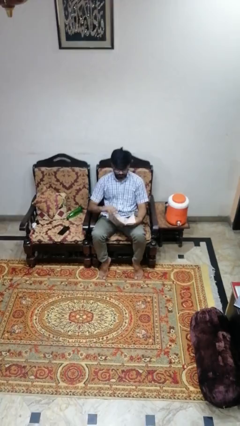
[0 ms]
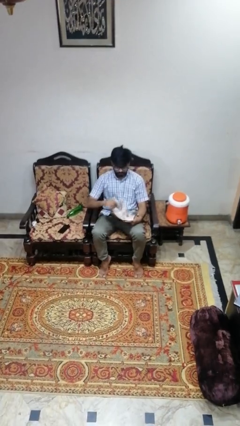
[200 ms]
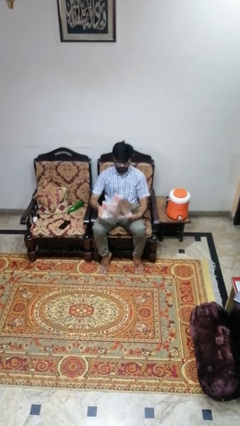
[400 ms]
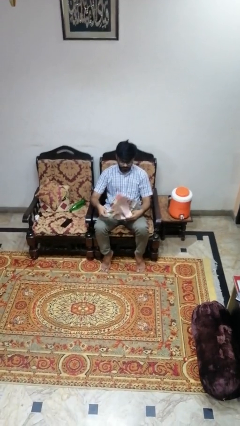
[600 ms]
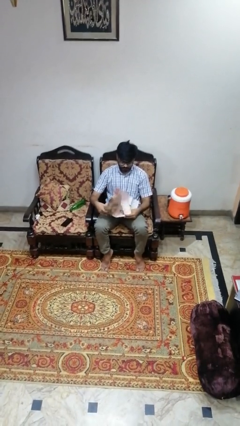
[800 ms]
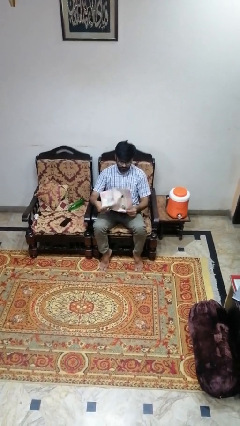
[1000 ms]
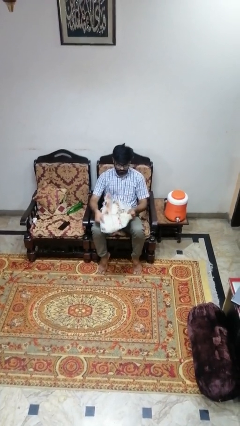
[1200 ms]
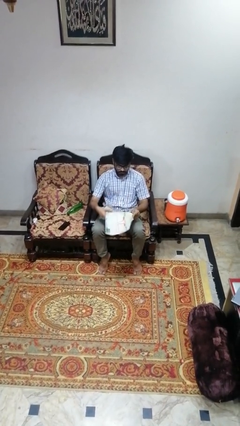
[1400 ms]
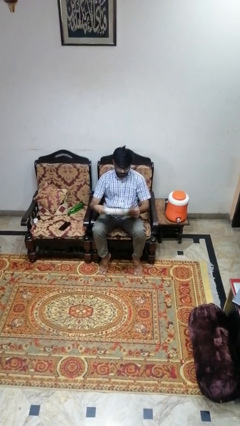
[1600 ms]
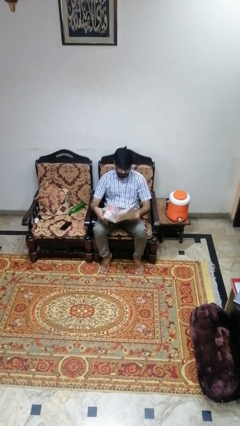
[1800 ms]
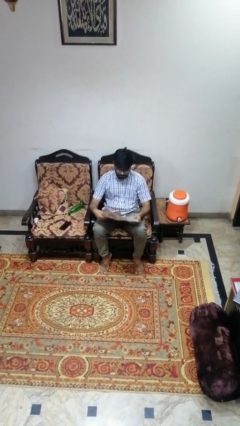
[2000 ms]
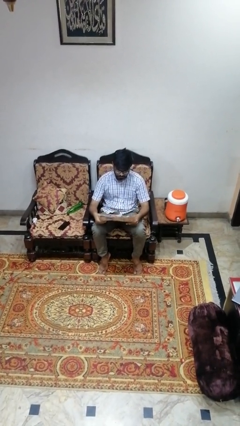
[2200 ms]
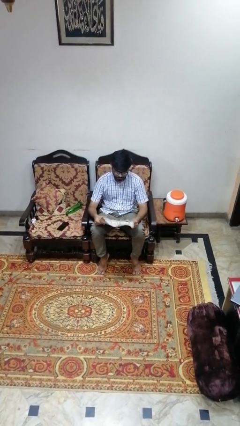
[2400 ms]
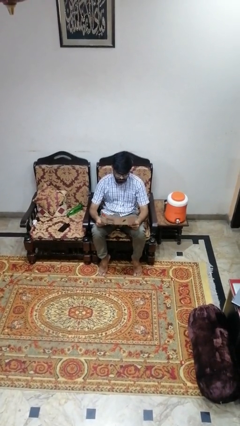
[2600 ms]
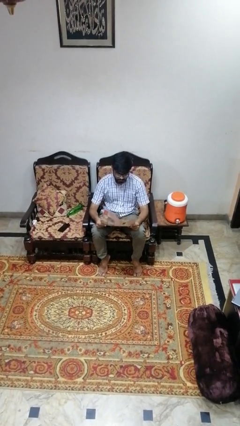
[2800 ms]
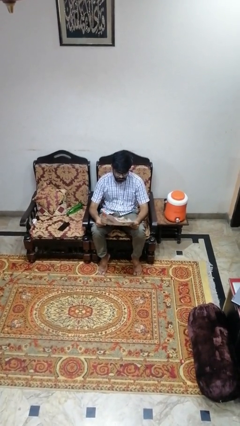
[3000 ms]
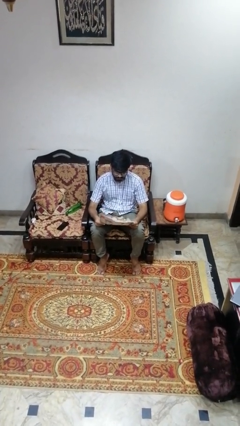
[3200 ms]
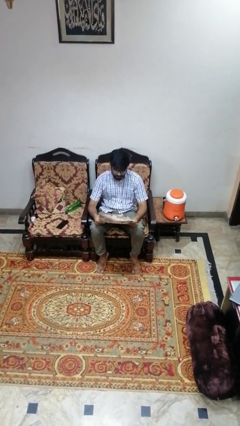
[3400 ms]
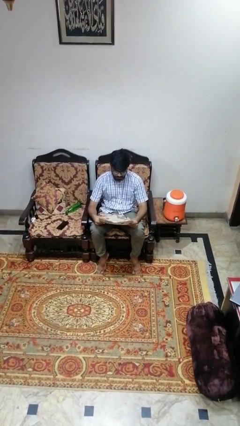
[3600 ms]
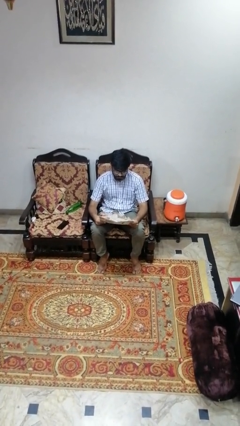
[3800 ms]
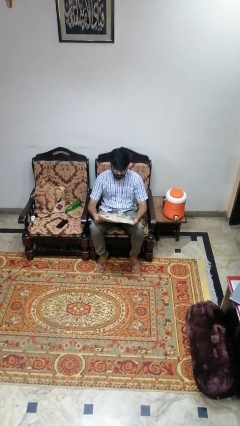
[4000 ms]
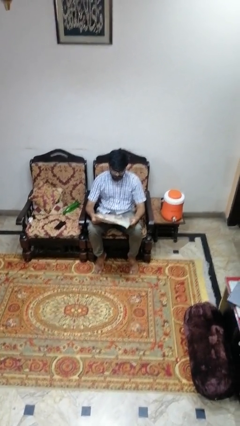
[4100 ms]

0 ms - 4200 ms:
person reads newspaper

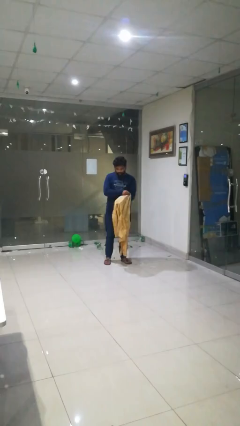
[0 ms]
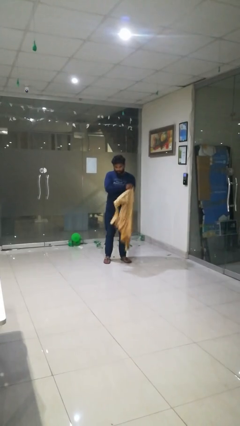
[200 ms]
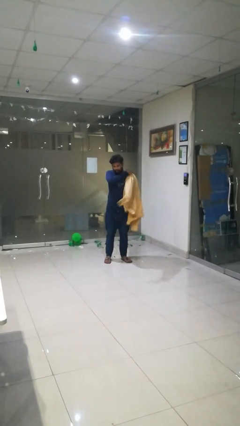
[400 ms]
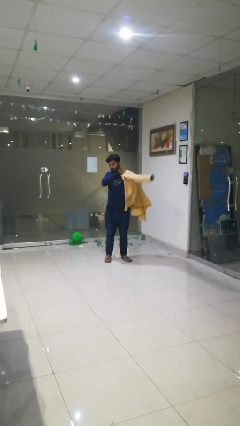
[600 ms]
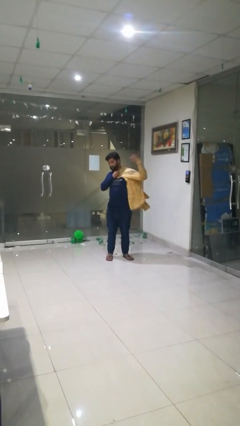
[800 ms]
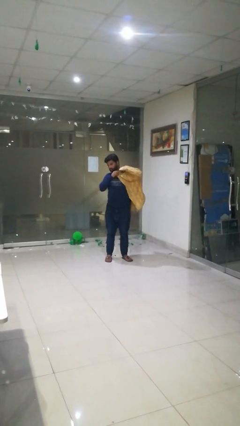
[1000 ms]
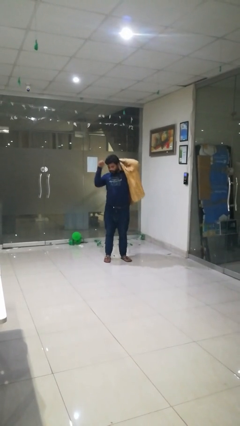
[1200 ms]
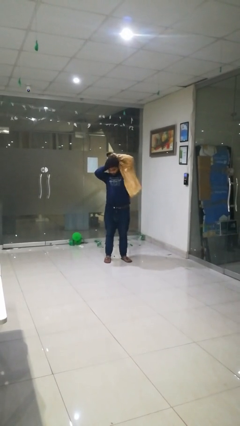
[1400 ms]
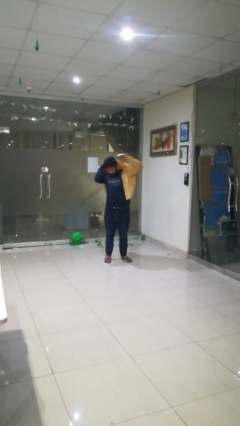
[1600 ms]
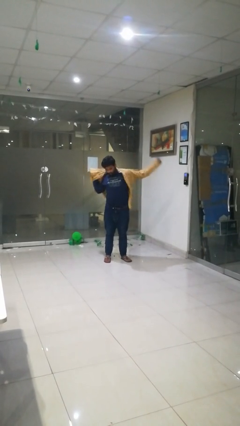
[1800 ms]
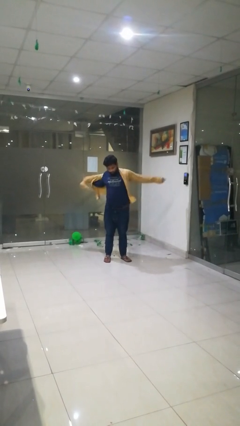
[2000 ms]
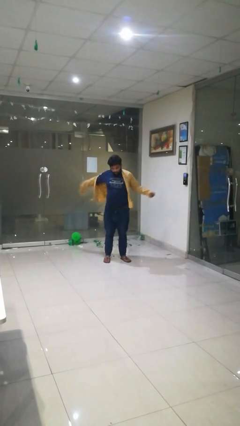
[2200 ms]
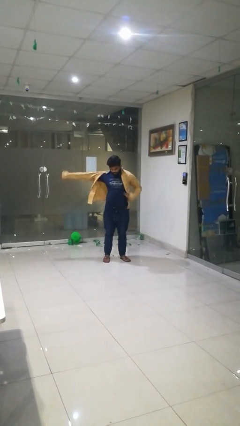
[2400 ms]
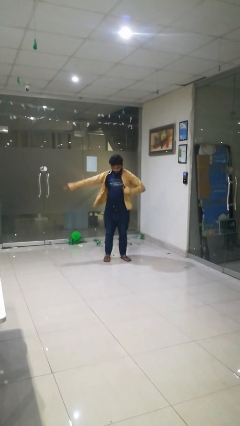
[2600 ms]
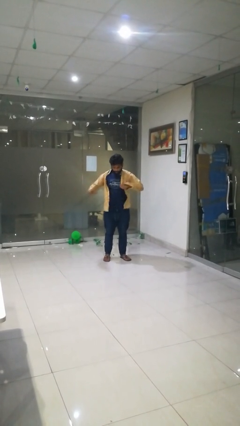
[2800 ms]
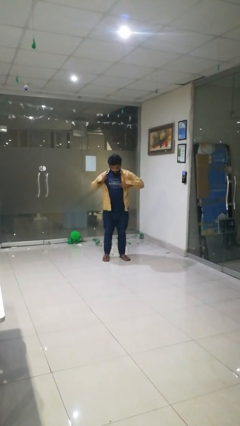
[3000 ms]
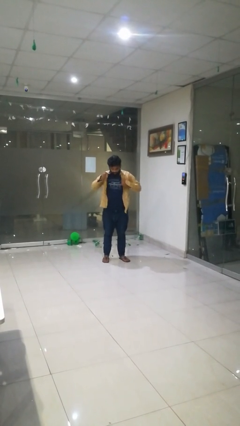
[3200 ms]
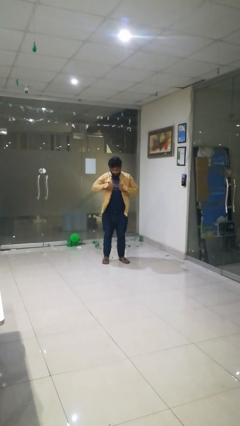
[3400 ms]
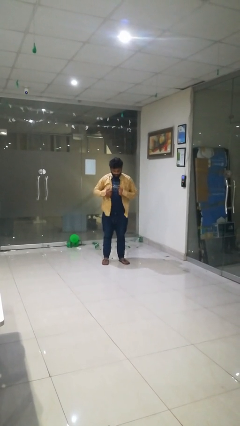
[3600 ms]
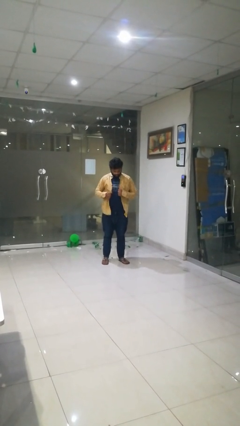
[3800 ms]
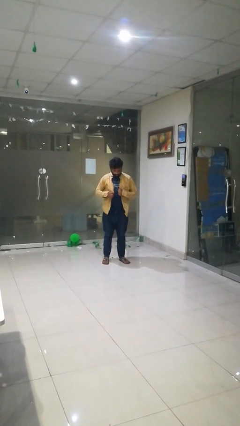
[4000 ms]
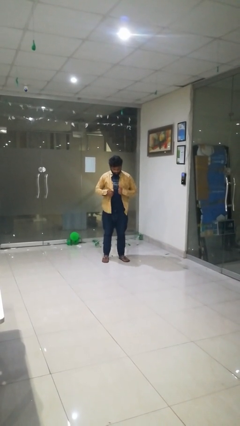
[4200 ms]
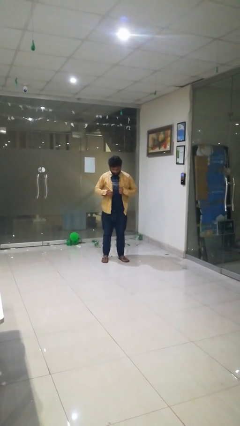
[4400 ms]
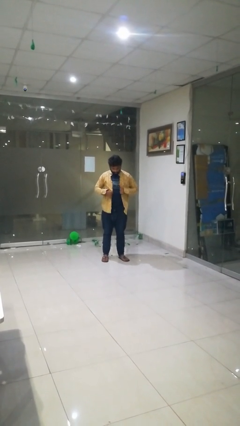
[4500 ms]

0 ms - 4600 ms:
person puts on shirt

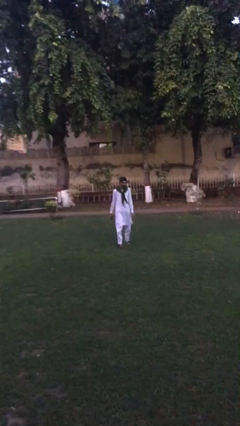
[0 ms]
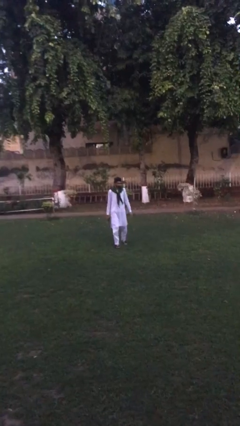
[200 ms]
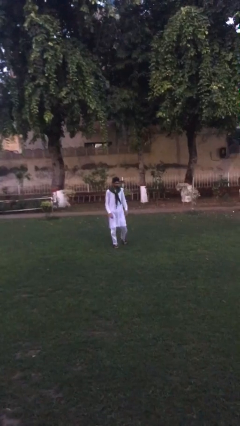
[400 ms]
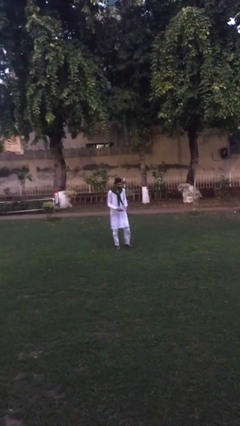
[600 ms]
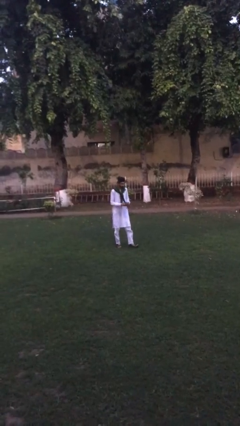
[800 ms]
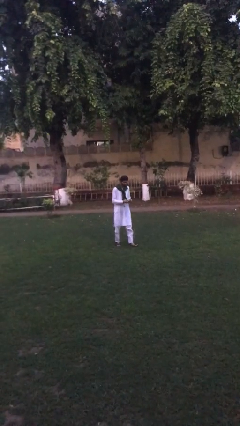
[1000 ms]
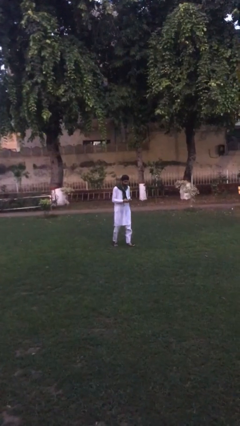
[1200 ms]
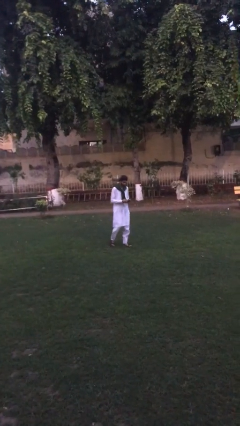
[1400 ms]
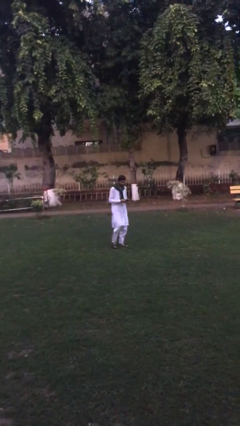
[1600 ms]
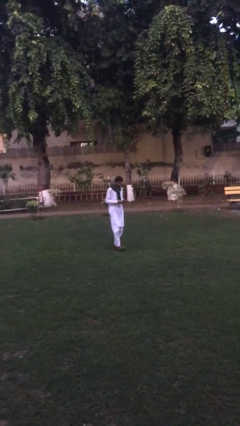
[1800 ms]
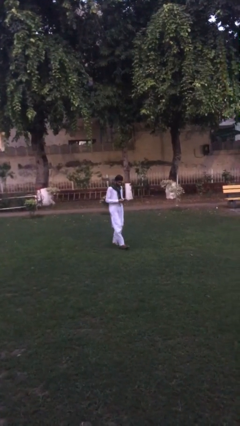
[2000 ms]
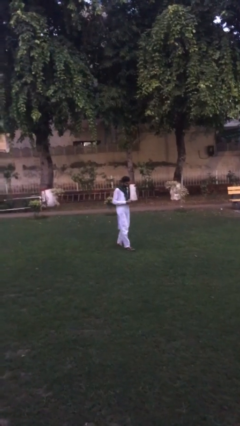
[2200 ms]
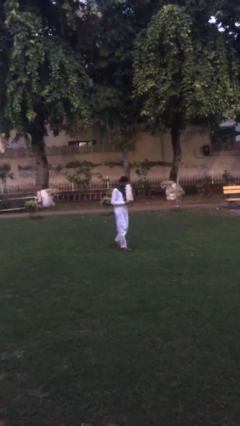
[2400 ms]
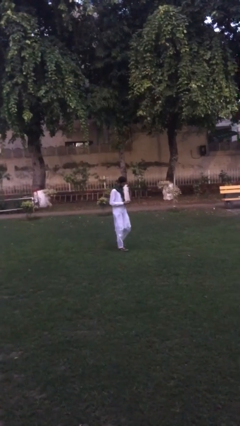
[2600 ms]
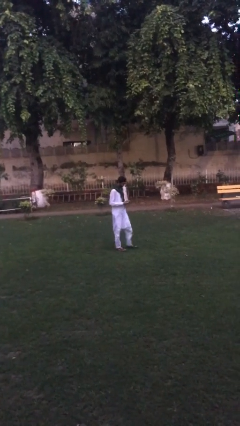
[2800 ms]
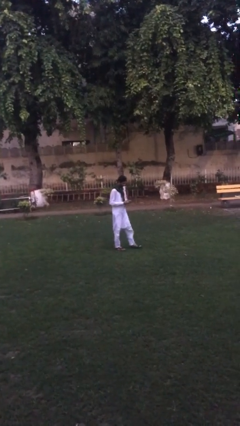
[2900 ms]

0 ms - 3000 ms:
person texts on phone

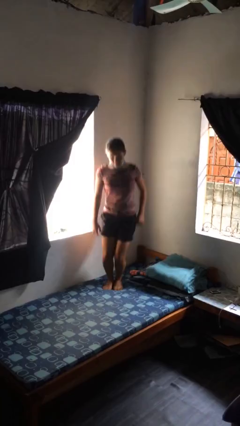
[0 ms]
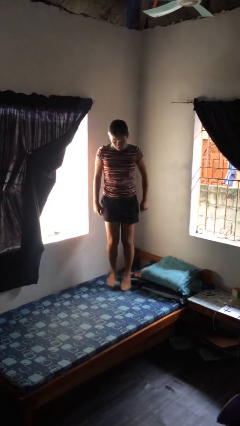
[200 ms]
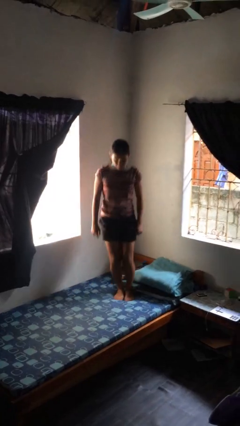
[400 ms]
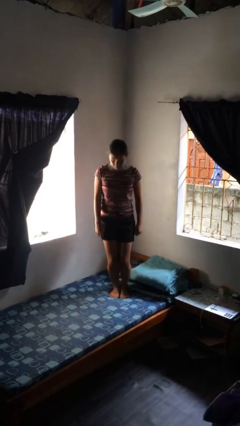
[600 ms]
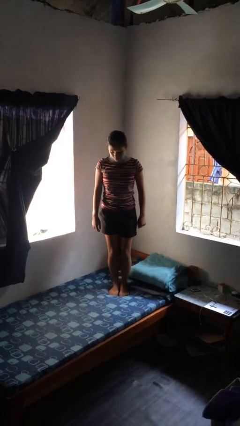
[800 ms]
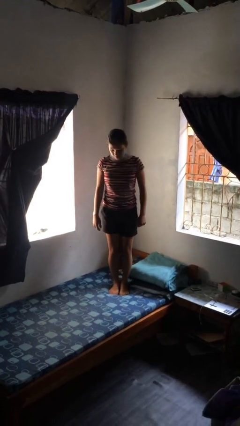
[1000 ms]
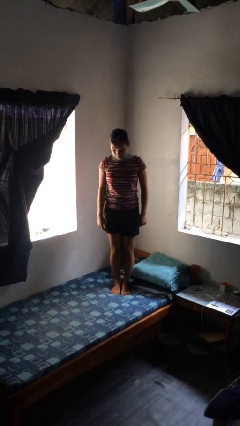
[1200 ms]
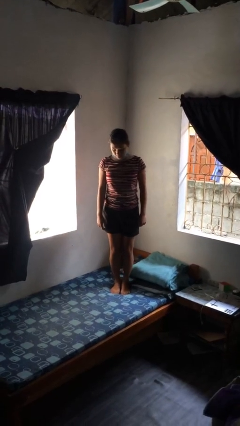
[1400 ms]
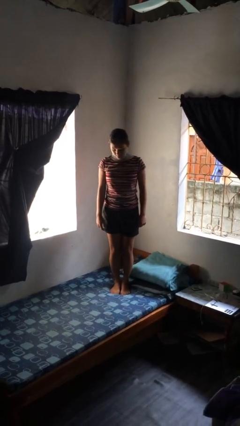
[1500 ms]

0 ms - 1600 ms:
person jumps on bed

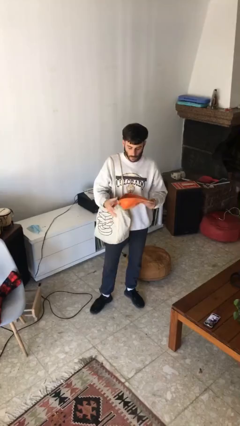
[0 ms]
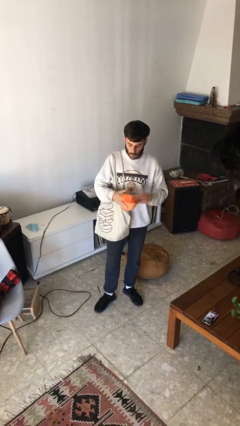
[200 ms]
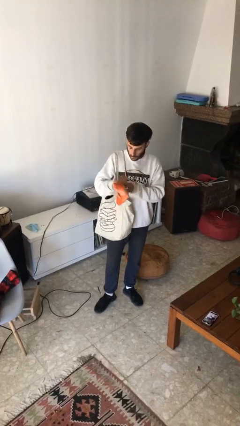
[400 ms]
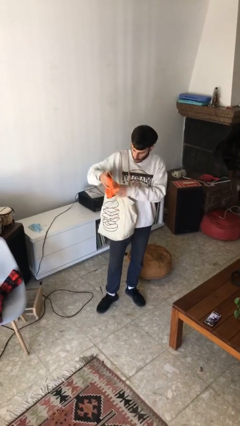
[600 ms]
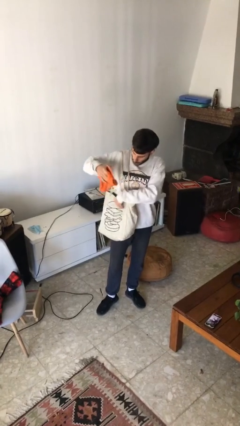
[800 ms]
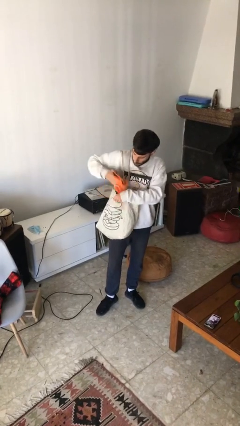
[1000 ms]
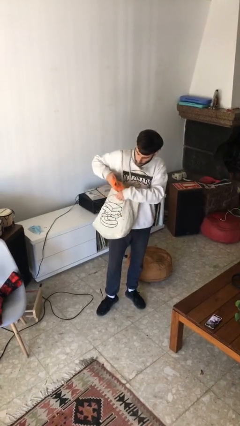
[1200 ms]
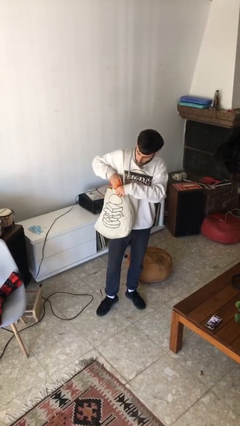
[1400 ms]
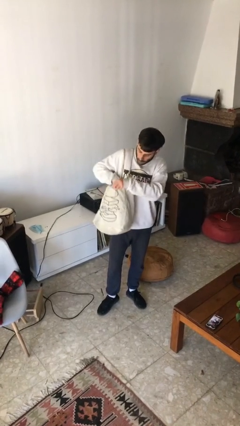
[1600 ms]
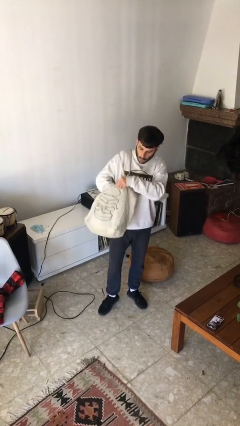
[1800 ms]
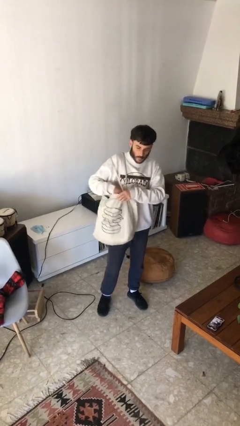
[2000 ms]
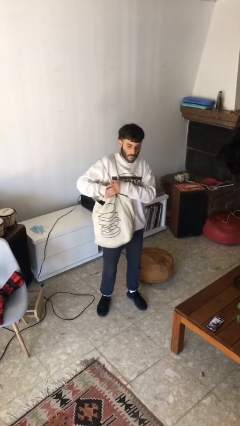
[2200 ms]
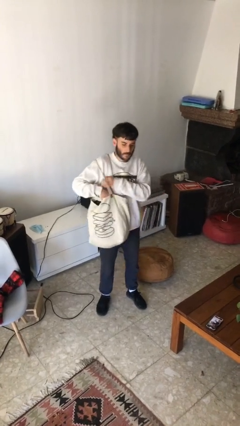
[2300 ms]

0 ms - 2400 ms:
person puts object into purse

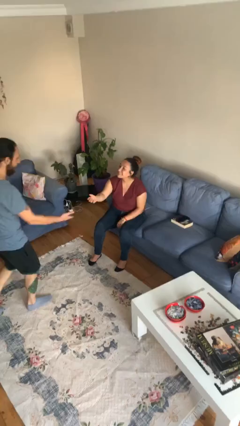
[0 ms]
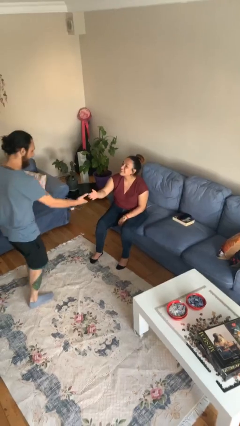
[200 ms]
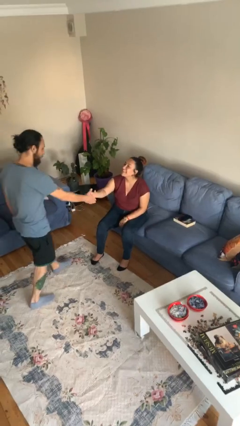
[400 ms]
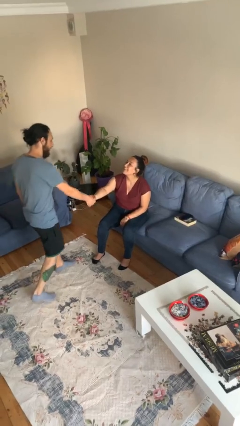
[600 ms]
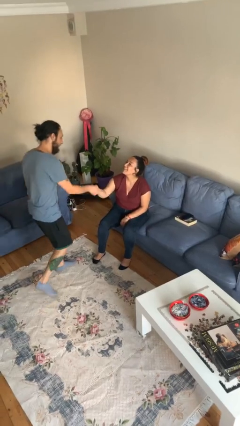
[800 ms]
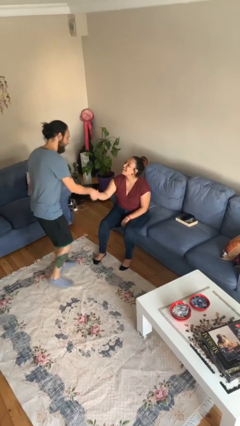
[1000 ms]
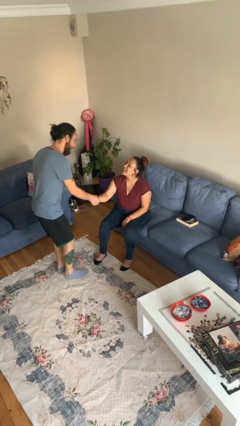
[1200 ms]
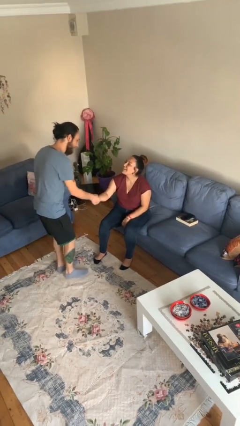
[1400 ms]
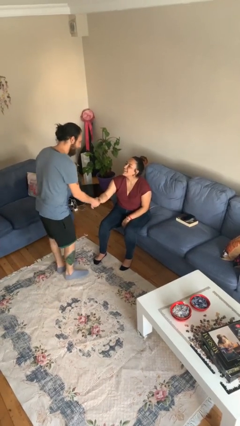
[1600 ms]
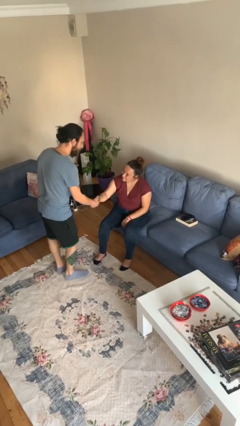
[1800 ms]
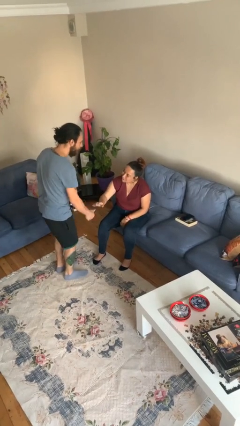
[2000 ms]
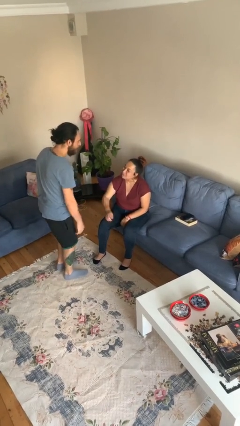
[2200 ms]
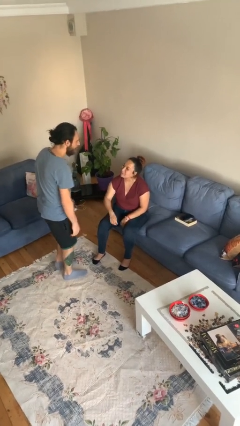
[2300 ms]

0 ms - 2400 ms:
person shakes hand
